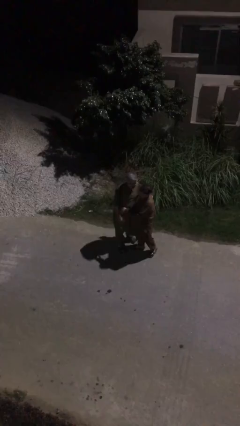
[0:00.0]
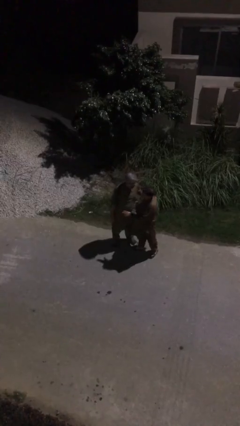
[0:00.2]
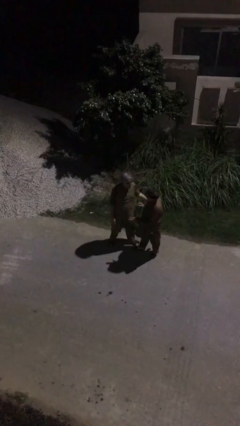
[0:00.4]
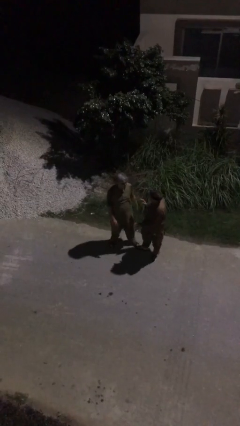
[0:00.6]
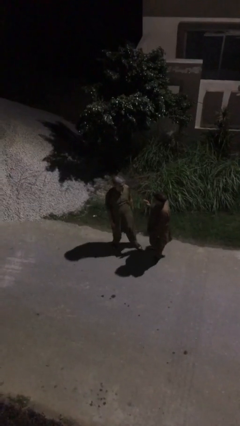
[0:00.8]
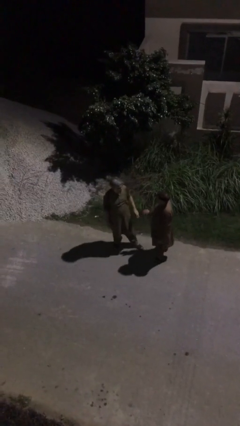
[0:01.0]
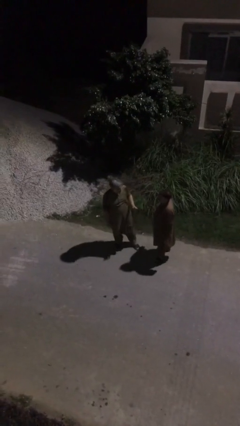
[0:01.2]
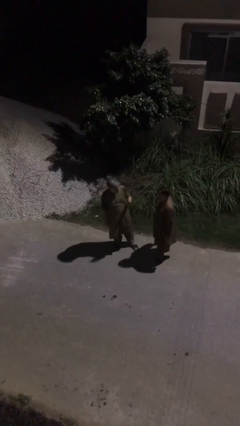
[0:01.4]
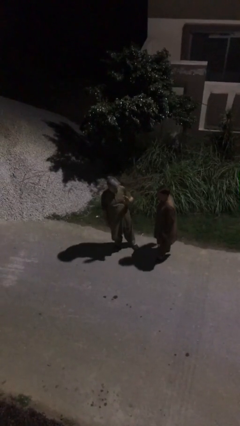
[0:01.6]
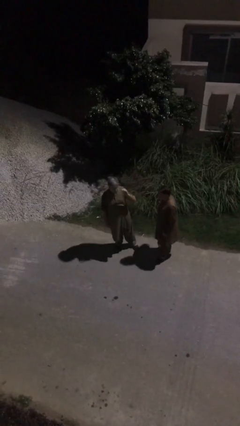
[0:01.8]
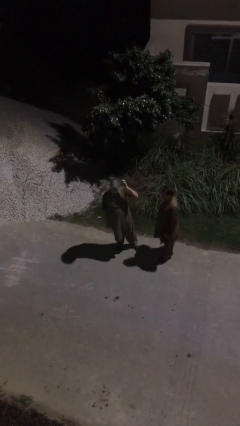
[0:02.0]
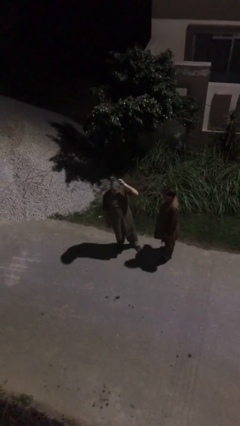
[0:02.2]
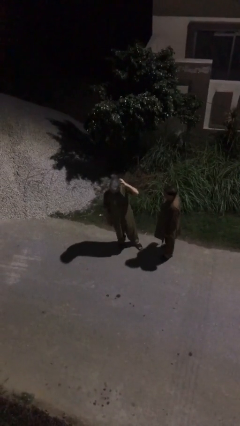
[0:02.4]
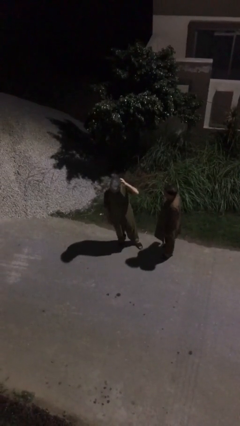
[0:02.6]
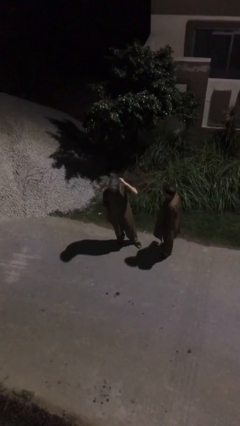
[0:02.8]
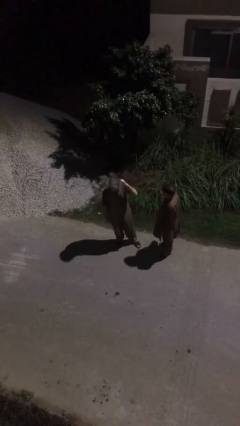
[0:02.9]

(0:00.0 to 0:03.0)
person talks to person

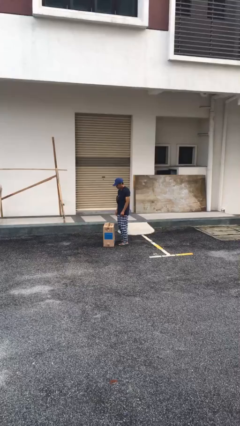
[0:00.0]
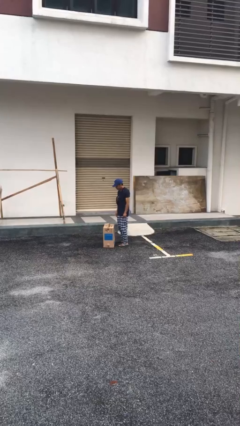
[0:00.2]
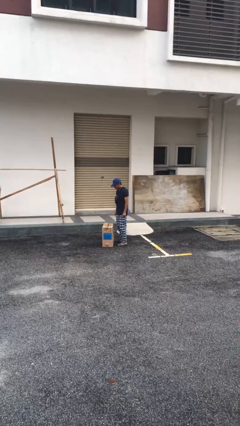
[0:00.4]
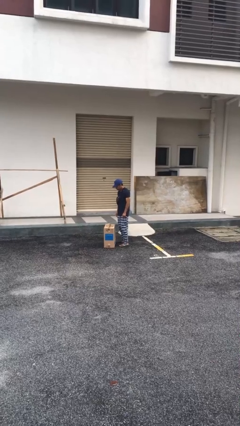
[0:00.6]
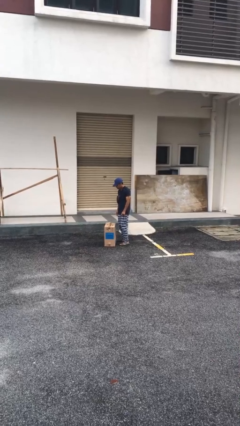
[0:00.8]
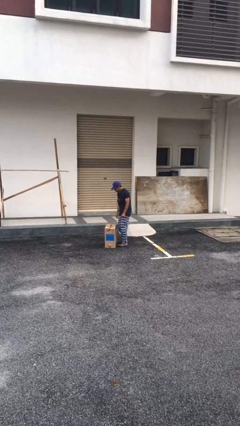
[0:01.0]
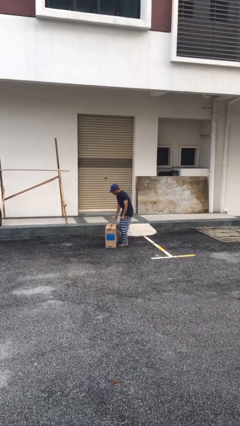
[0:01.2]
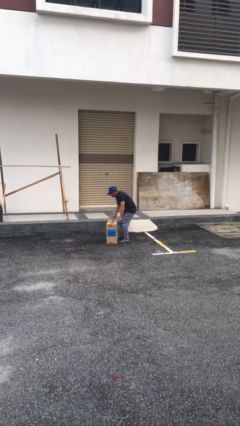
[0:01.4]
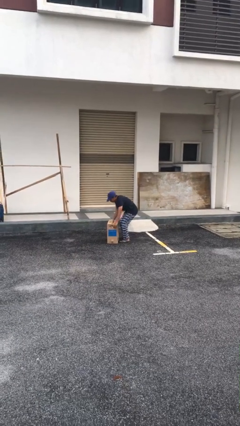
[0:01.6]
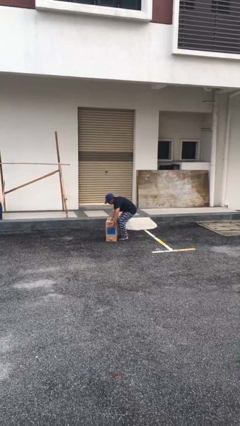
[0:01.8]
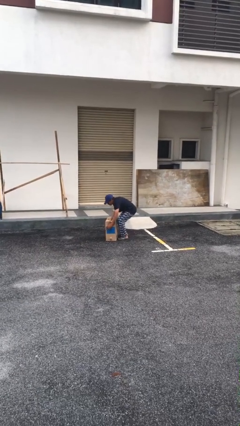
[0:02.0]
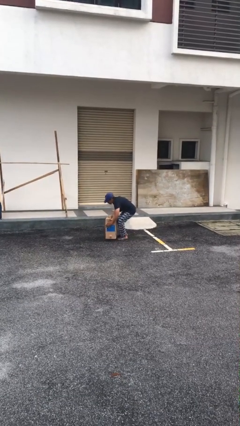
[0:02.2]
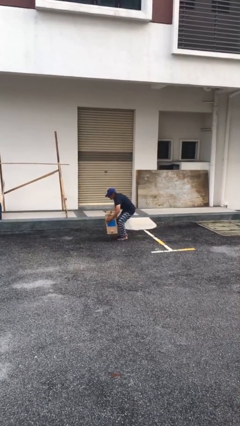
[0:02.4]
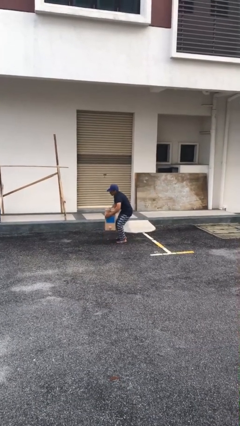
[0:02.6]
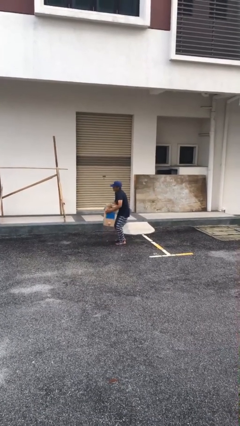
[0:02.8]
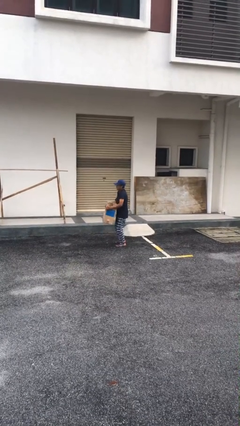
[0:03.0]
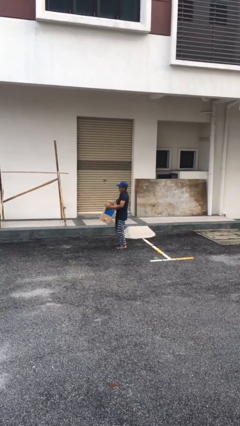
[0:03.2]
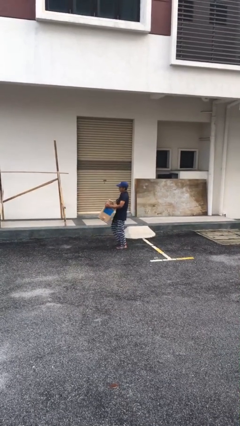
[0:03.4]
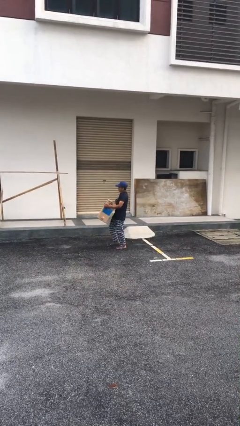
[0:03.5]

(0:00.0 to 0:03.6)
person picks up object from floor

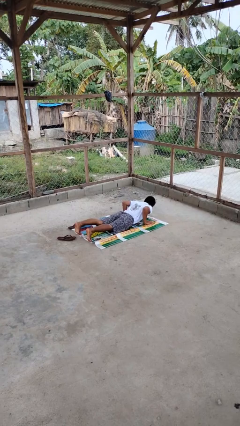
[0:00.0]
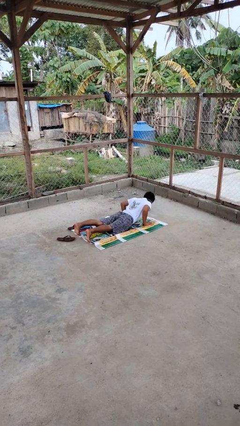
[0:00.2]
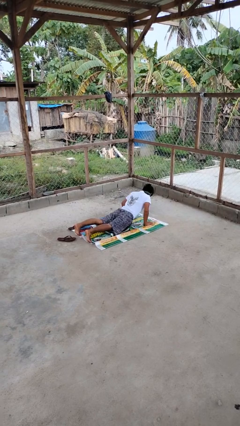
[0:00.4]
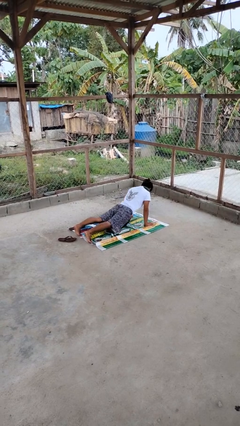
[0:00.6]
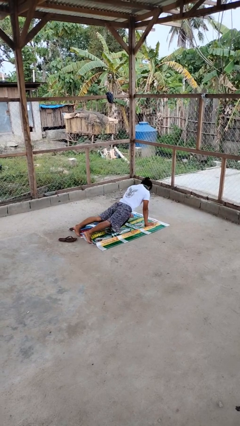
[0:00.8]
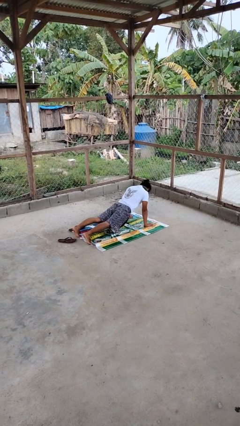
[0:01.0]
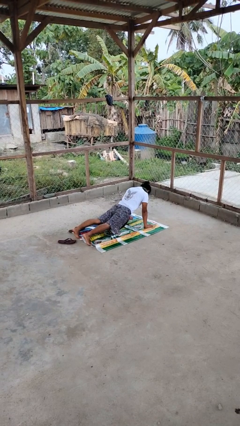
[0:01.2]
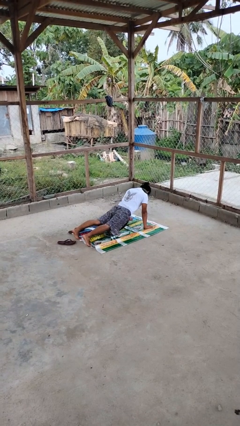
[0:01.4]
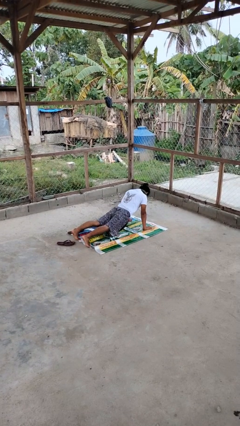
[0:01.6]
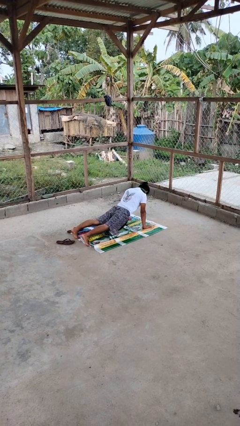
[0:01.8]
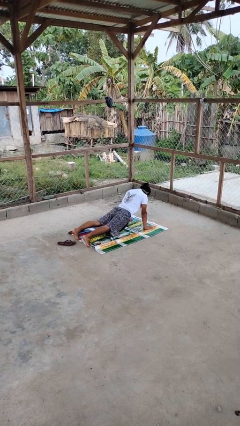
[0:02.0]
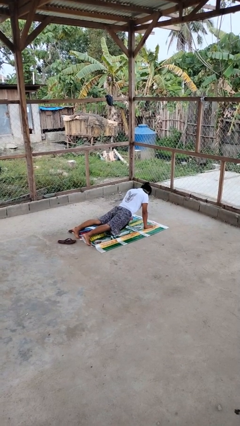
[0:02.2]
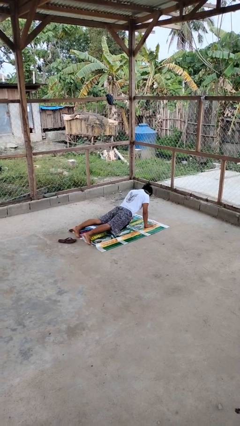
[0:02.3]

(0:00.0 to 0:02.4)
person exercises with pushup

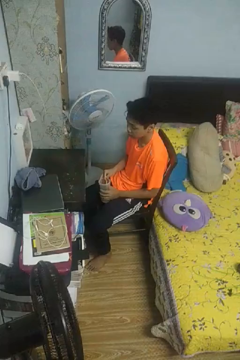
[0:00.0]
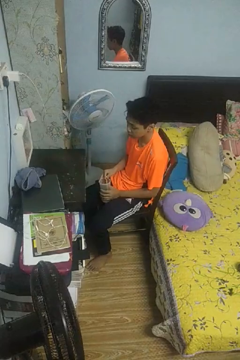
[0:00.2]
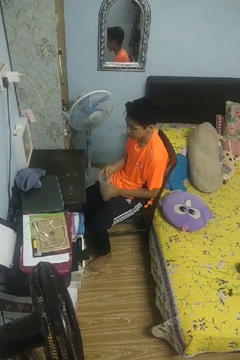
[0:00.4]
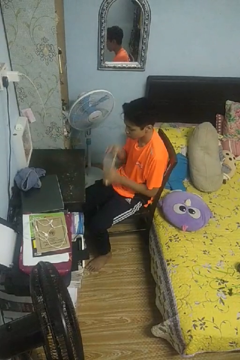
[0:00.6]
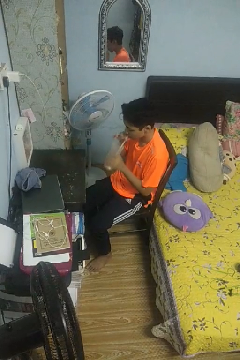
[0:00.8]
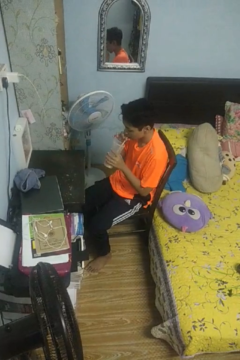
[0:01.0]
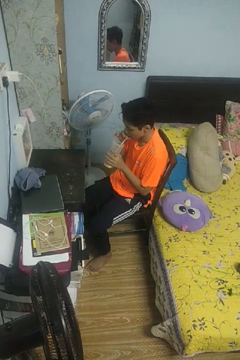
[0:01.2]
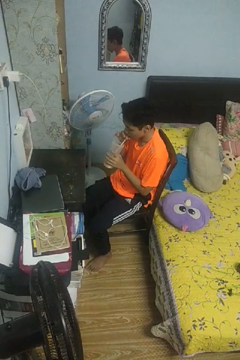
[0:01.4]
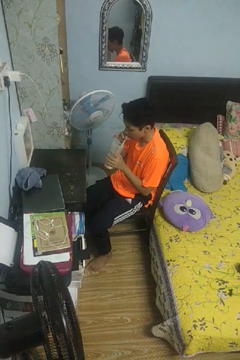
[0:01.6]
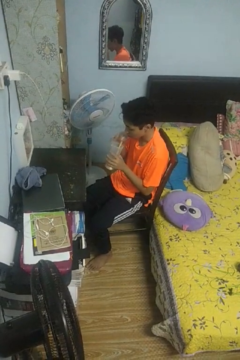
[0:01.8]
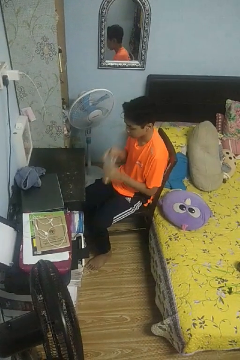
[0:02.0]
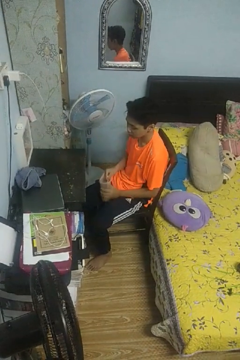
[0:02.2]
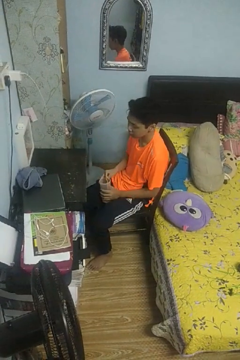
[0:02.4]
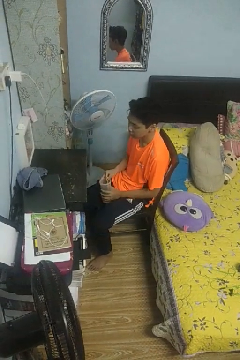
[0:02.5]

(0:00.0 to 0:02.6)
person drinks from straw

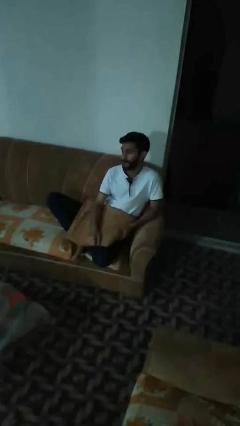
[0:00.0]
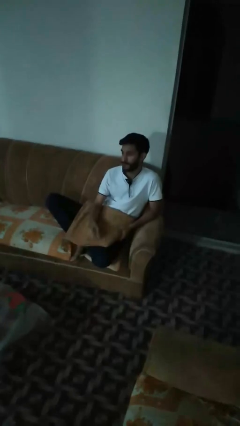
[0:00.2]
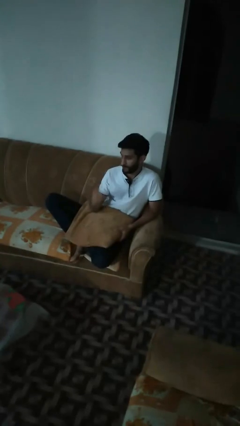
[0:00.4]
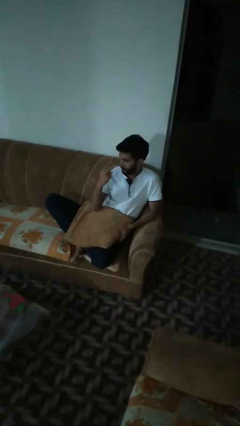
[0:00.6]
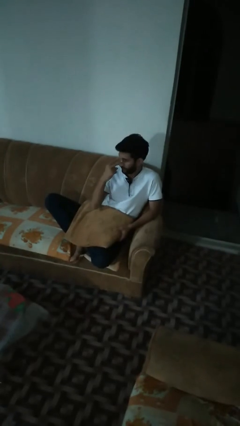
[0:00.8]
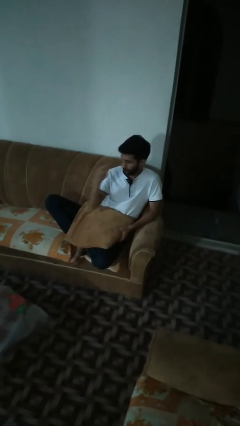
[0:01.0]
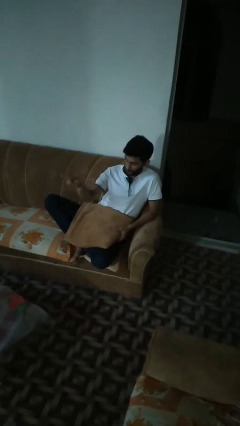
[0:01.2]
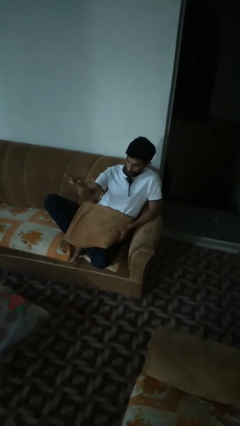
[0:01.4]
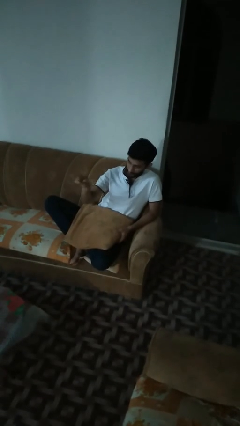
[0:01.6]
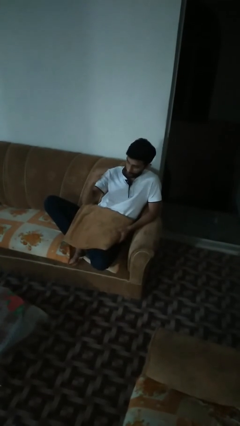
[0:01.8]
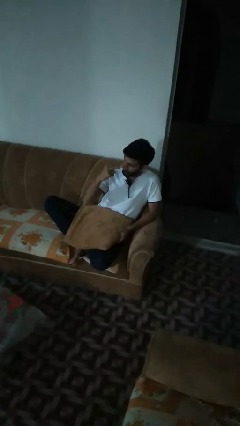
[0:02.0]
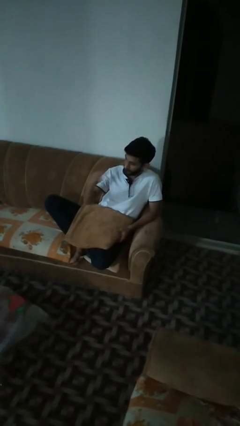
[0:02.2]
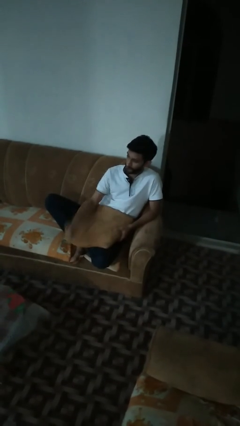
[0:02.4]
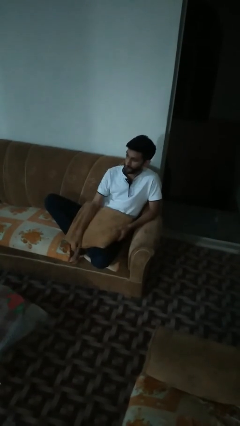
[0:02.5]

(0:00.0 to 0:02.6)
person gestures watch closely

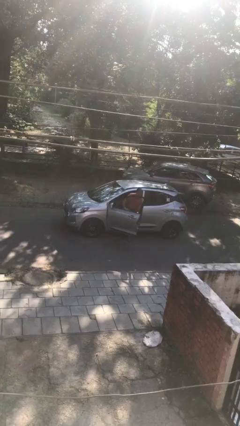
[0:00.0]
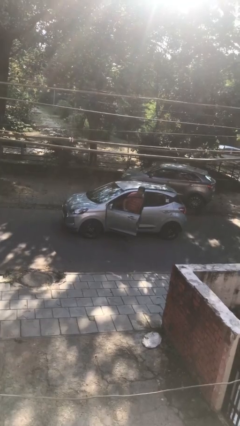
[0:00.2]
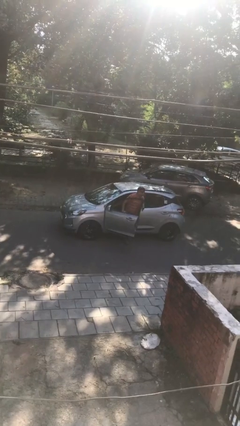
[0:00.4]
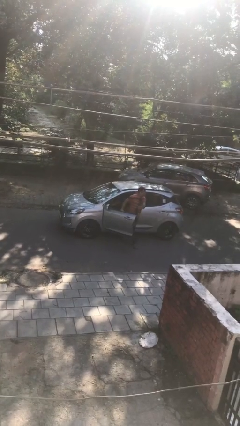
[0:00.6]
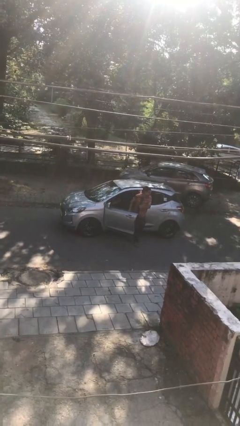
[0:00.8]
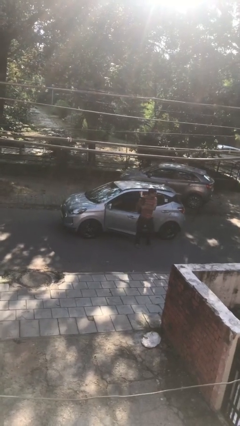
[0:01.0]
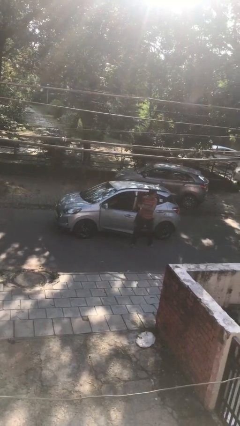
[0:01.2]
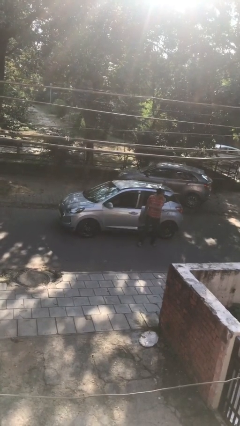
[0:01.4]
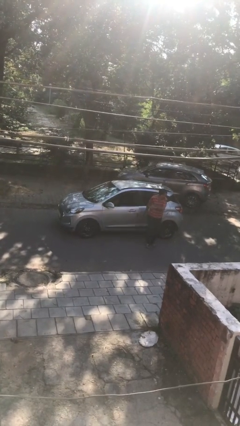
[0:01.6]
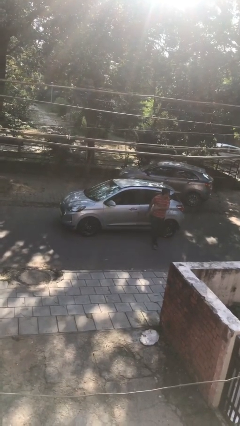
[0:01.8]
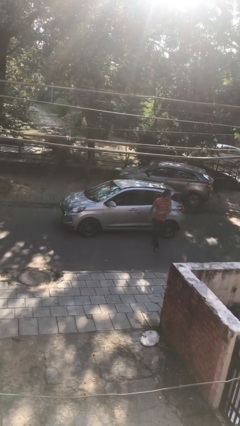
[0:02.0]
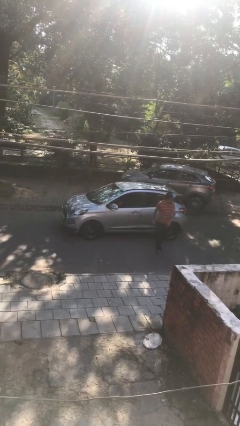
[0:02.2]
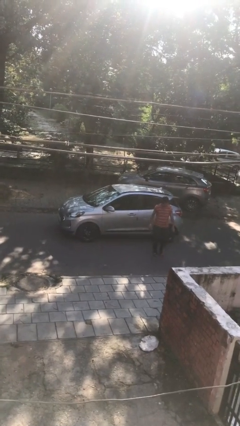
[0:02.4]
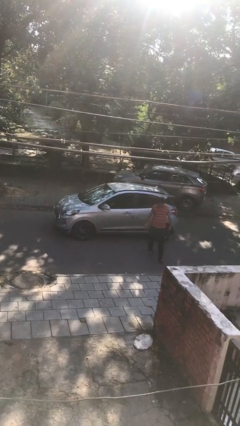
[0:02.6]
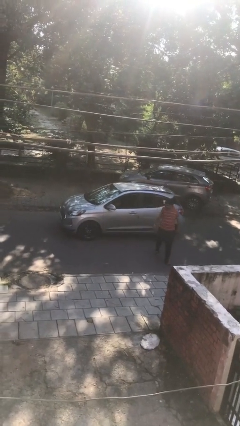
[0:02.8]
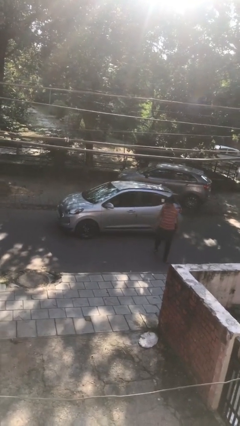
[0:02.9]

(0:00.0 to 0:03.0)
car drops off person

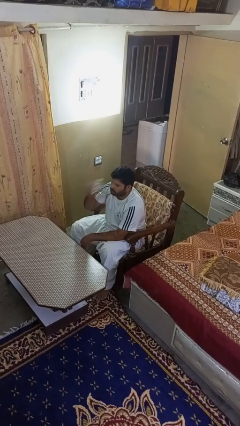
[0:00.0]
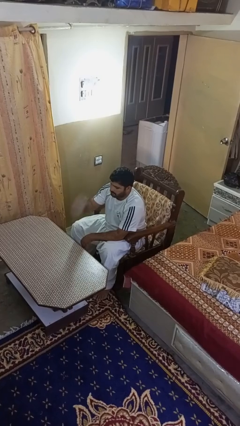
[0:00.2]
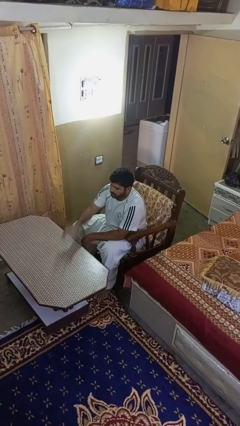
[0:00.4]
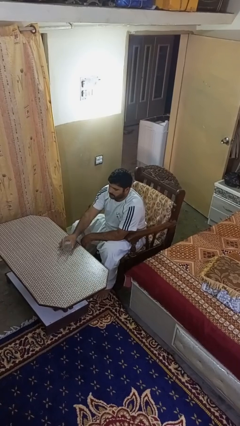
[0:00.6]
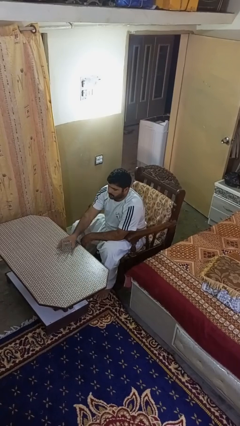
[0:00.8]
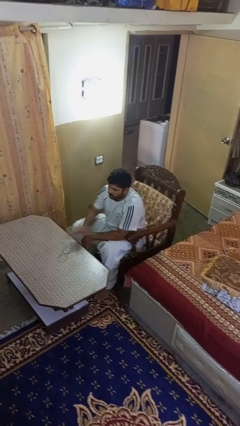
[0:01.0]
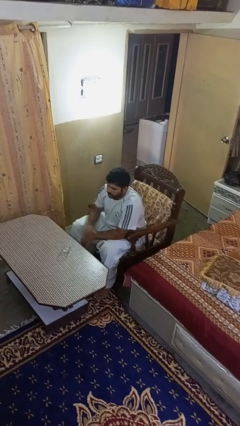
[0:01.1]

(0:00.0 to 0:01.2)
person puts down object on table
